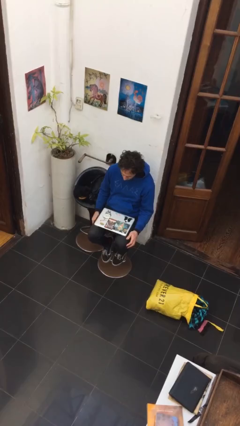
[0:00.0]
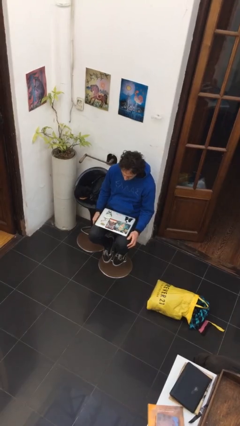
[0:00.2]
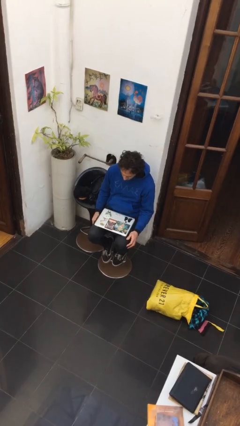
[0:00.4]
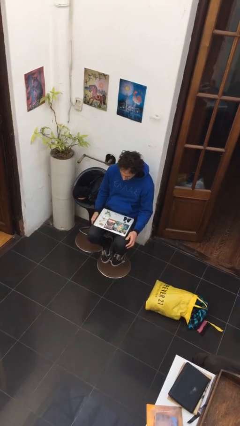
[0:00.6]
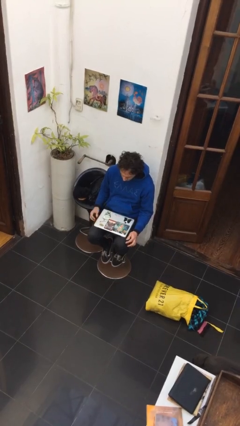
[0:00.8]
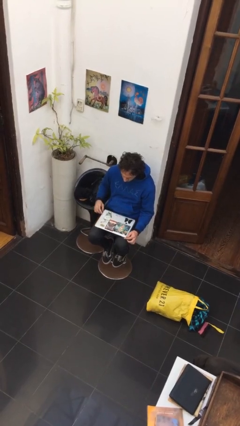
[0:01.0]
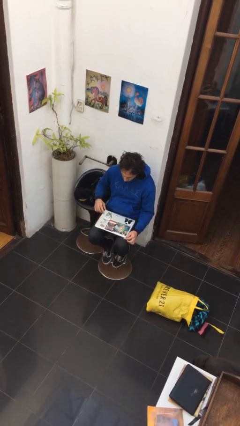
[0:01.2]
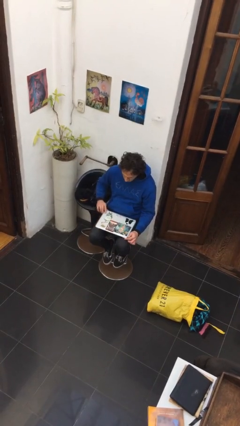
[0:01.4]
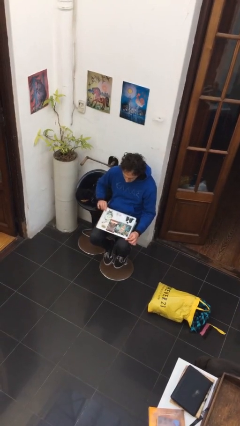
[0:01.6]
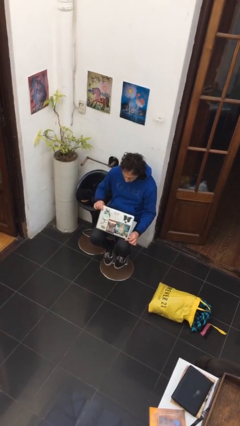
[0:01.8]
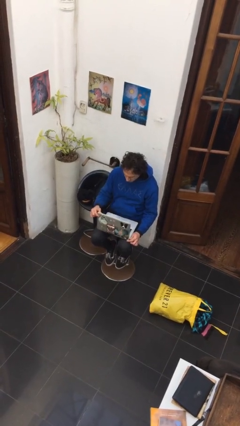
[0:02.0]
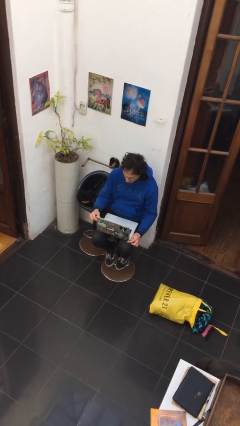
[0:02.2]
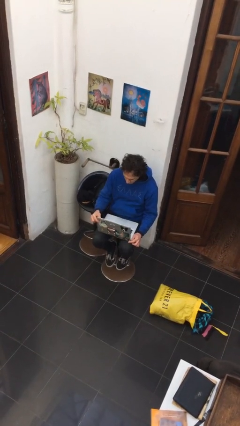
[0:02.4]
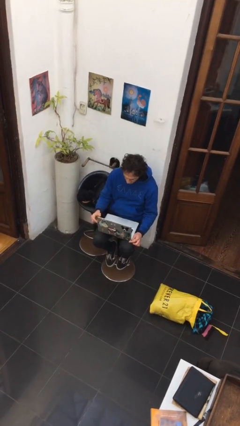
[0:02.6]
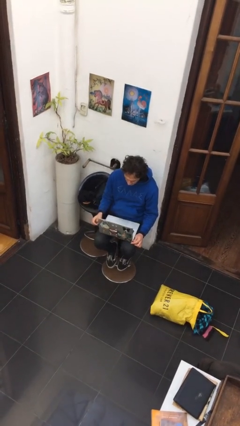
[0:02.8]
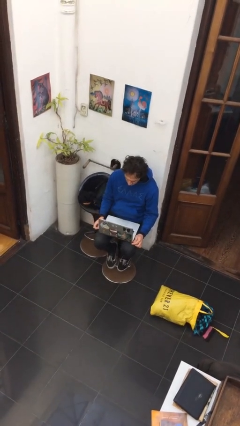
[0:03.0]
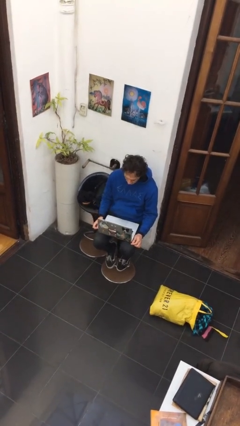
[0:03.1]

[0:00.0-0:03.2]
person opens laptop

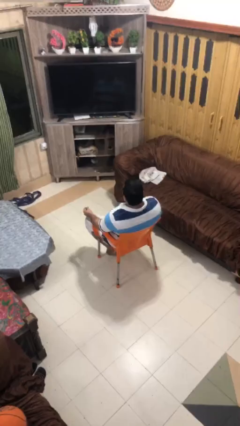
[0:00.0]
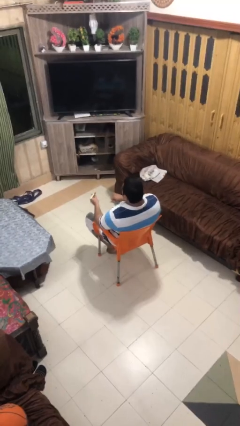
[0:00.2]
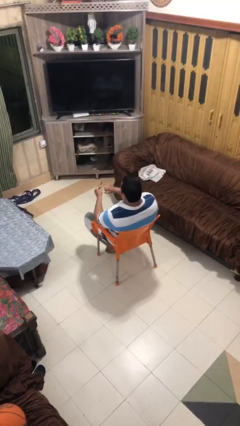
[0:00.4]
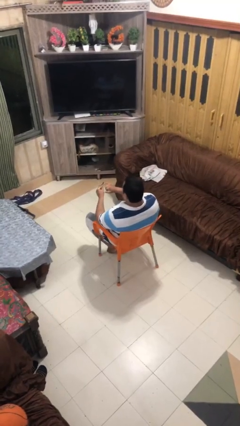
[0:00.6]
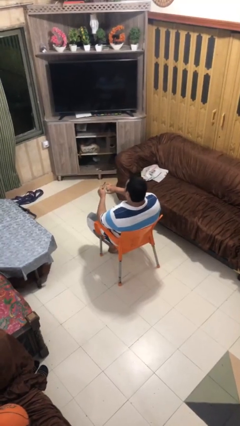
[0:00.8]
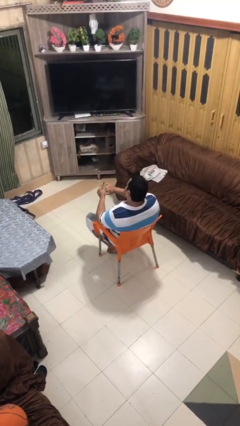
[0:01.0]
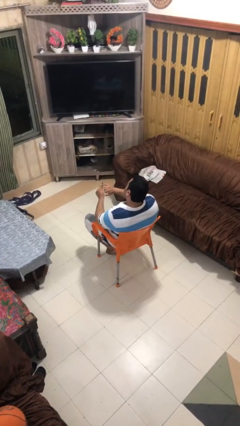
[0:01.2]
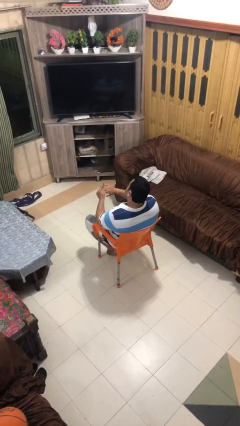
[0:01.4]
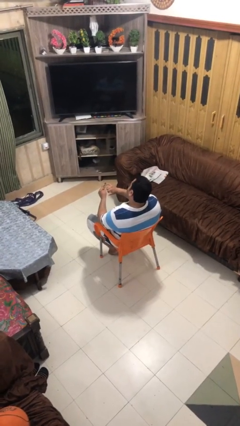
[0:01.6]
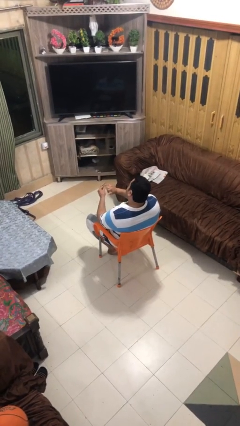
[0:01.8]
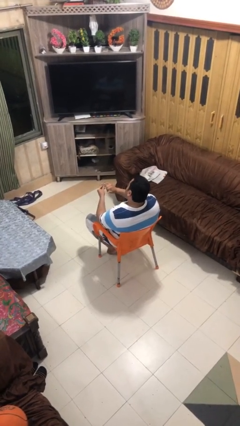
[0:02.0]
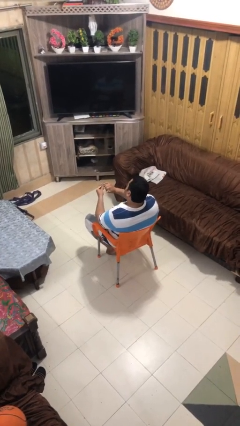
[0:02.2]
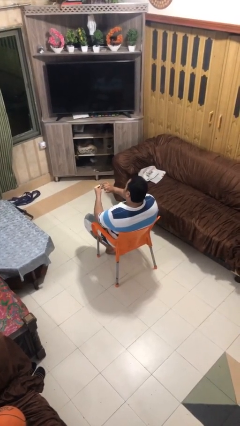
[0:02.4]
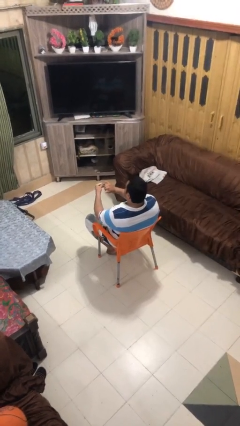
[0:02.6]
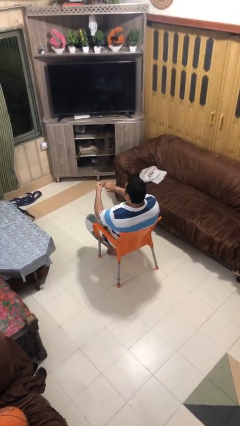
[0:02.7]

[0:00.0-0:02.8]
person files fingernails

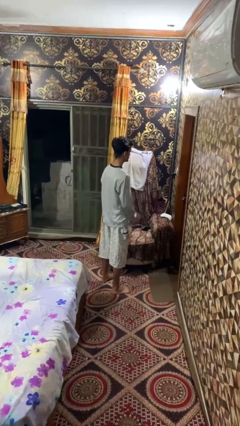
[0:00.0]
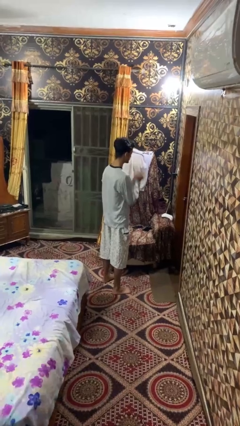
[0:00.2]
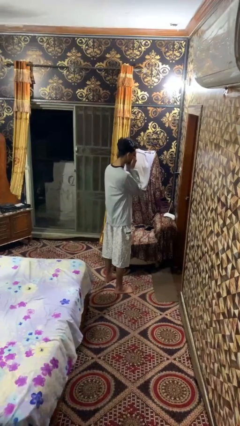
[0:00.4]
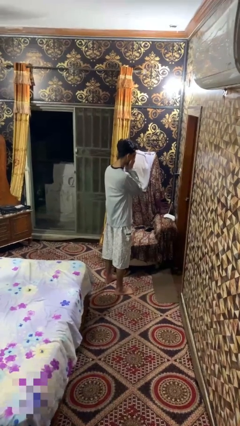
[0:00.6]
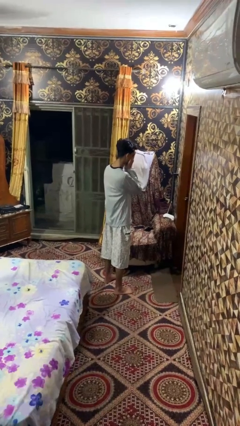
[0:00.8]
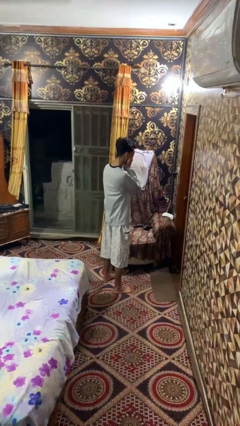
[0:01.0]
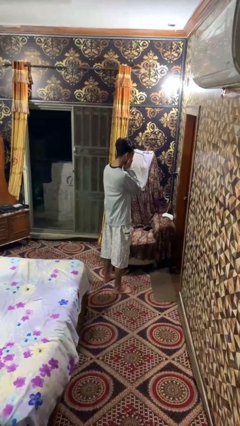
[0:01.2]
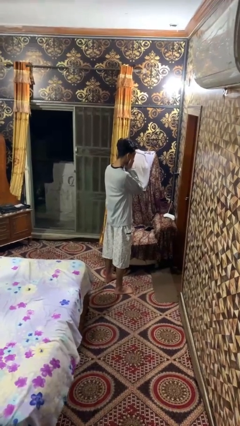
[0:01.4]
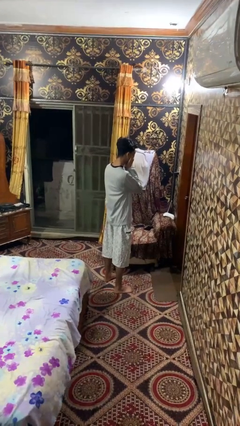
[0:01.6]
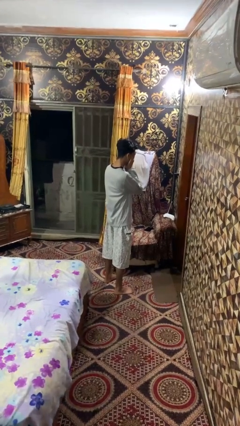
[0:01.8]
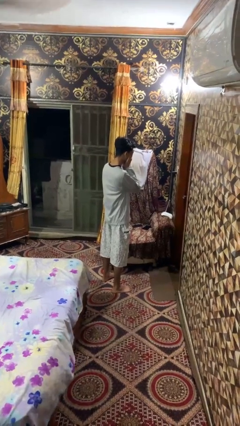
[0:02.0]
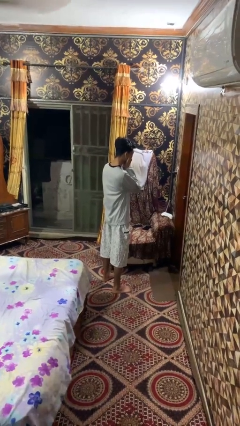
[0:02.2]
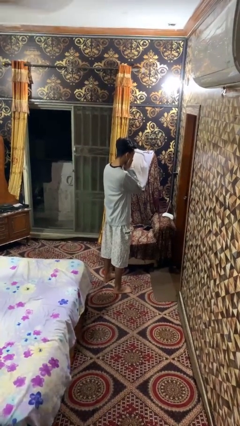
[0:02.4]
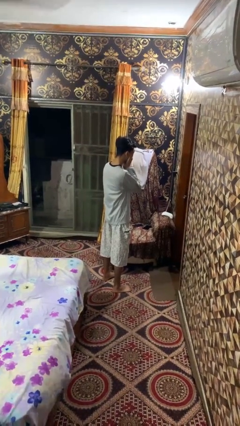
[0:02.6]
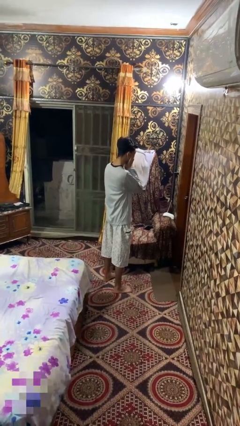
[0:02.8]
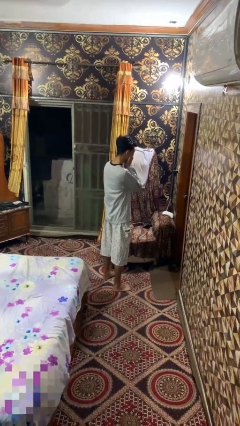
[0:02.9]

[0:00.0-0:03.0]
person covers face with hands

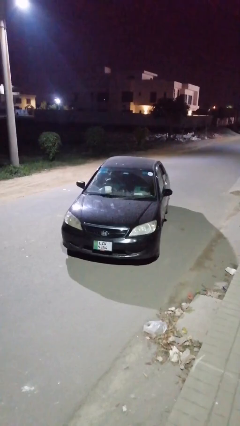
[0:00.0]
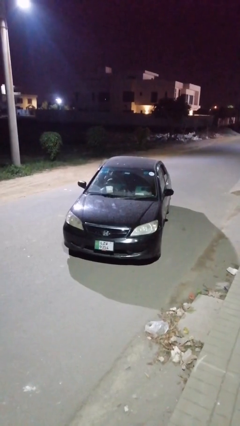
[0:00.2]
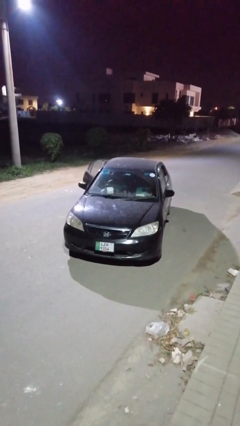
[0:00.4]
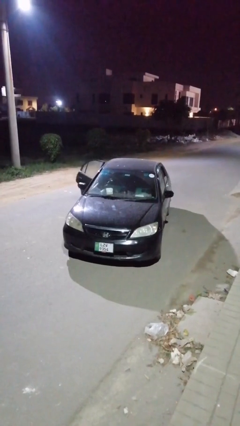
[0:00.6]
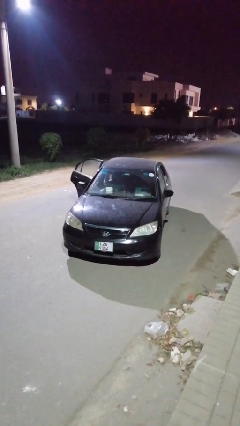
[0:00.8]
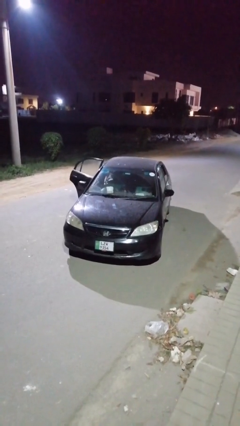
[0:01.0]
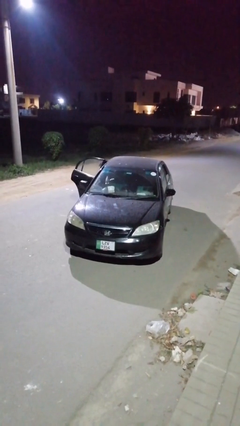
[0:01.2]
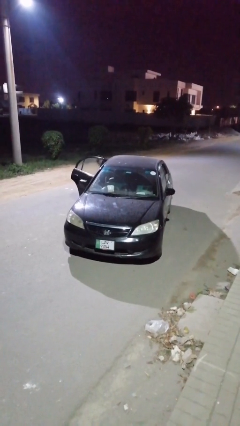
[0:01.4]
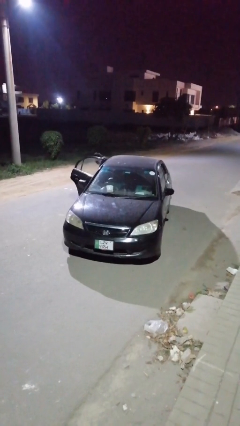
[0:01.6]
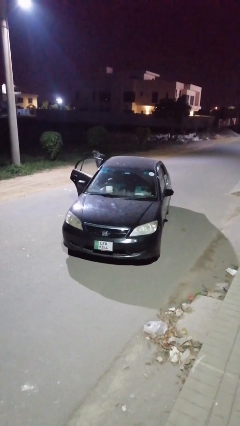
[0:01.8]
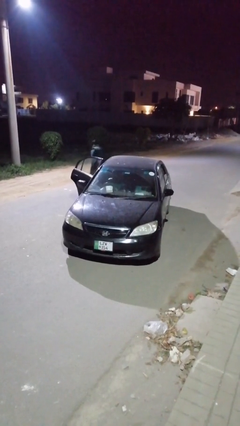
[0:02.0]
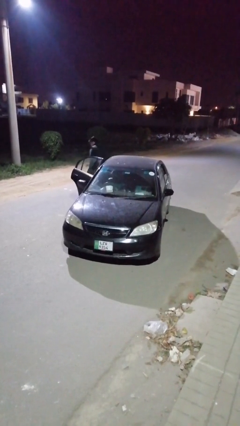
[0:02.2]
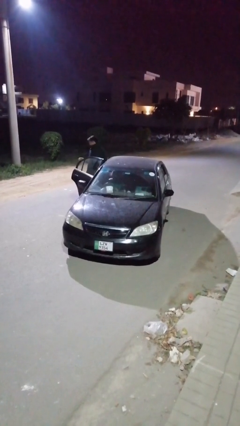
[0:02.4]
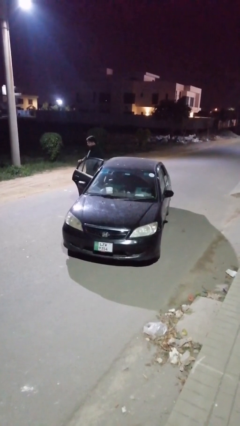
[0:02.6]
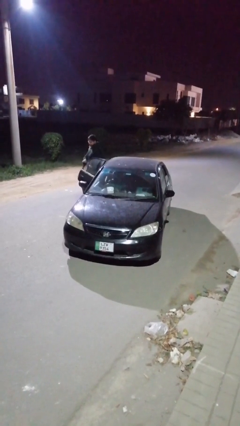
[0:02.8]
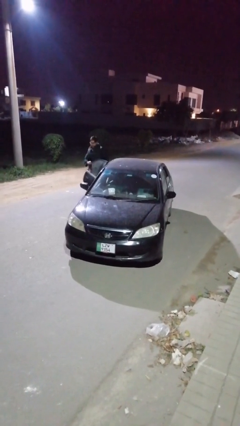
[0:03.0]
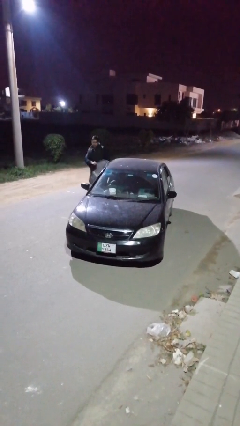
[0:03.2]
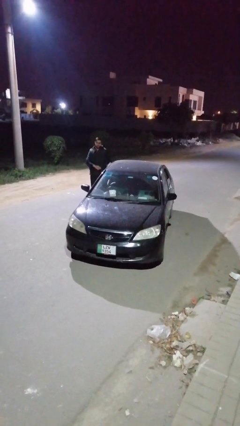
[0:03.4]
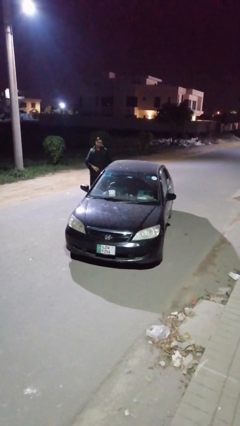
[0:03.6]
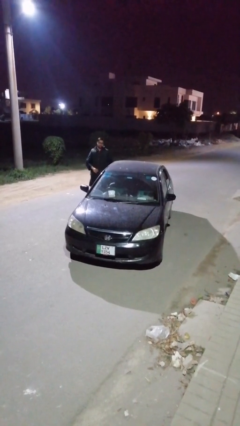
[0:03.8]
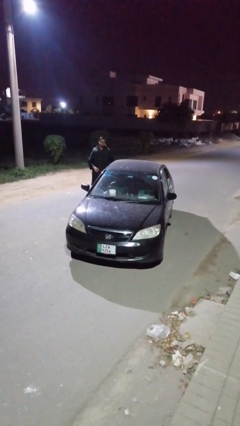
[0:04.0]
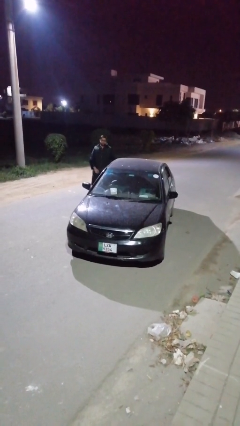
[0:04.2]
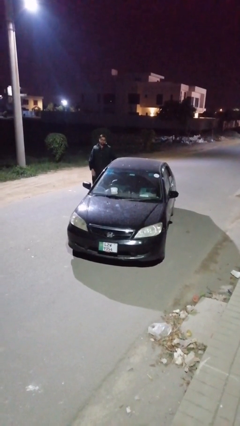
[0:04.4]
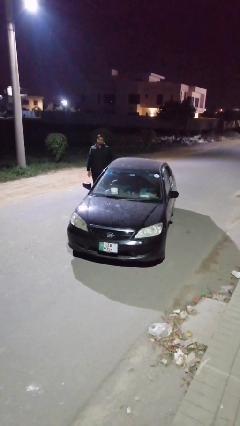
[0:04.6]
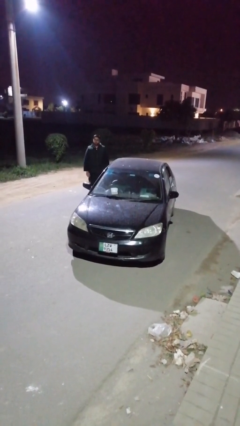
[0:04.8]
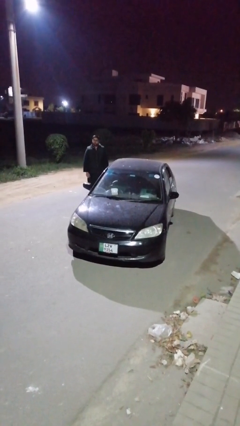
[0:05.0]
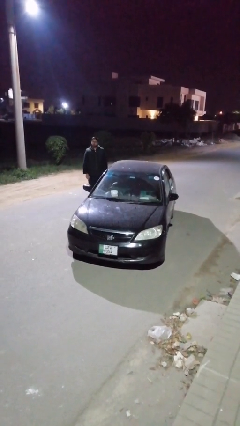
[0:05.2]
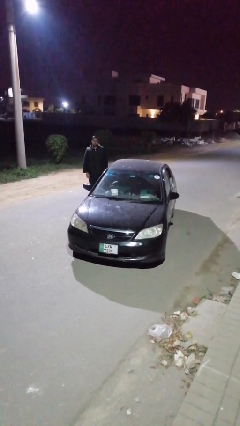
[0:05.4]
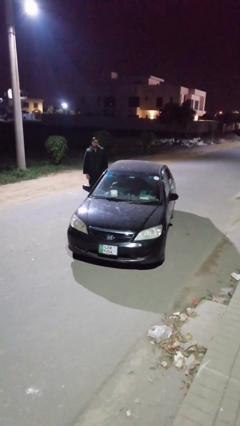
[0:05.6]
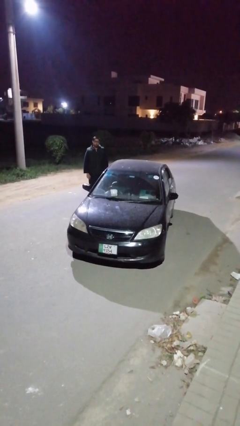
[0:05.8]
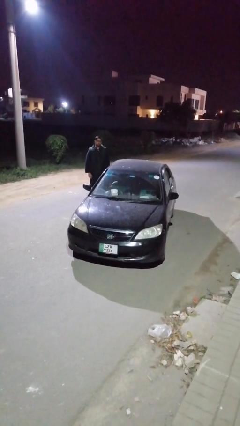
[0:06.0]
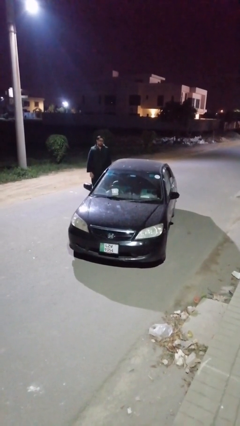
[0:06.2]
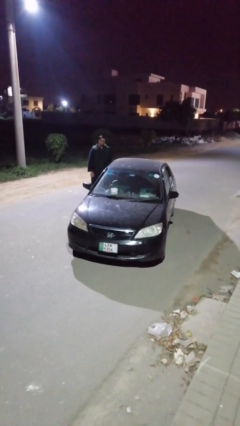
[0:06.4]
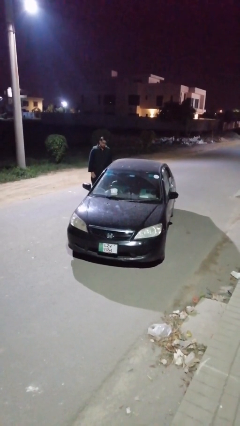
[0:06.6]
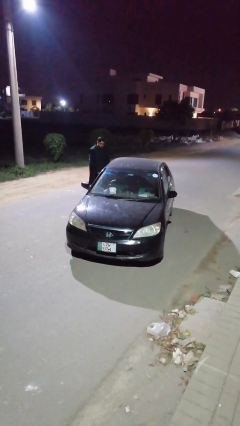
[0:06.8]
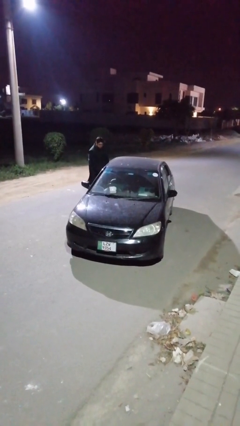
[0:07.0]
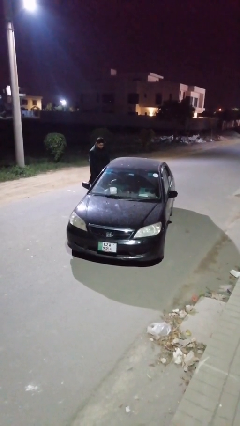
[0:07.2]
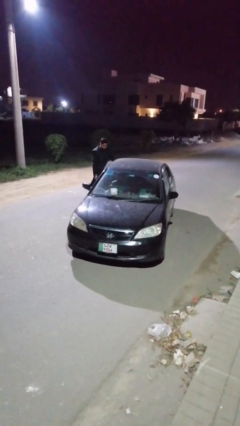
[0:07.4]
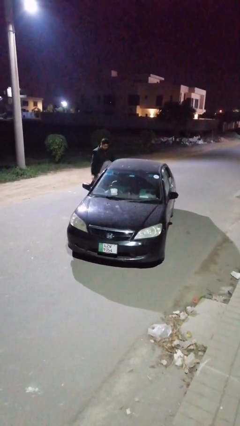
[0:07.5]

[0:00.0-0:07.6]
car drops off person

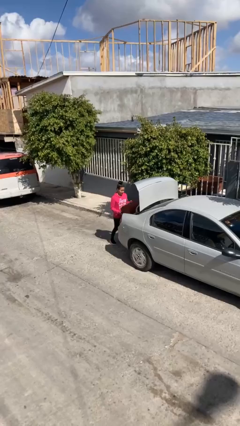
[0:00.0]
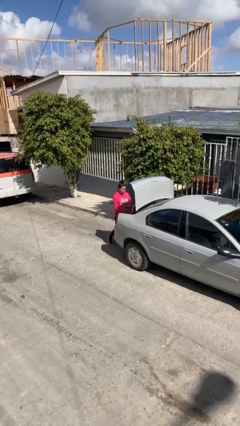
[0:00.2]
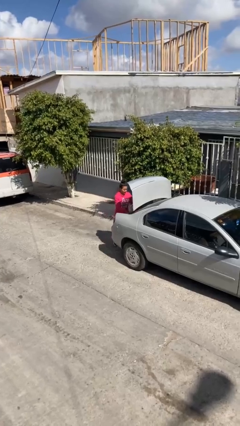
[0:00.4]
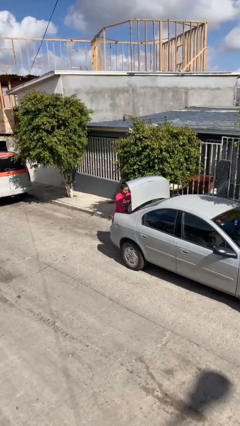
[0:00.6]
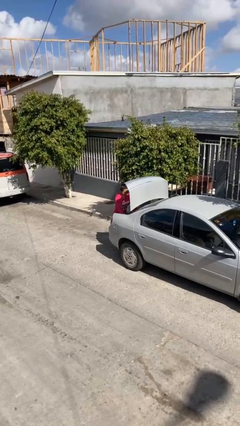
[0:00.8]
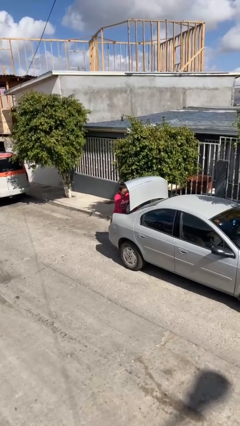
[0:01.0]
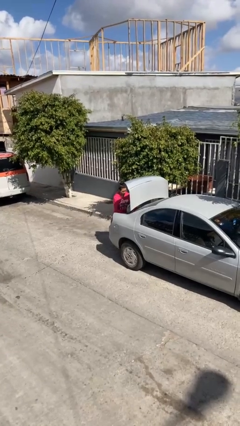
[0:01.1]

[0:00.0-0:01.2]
person loads car
